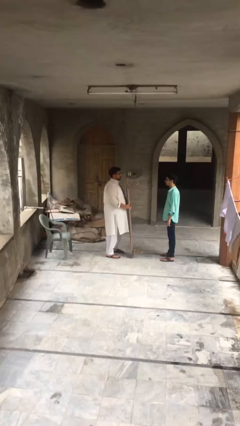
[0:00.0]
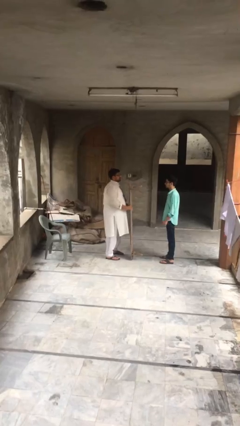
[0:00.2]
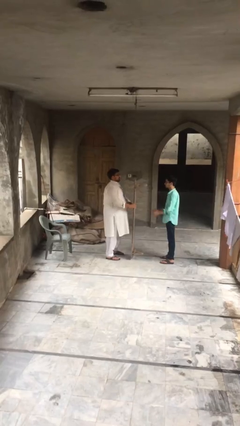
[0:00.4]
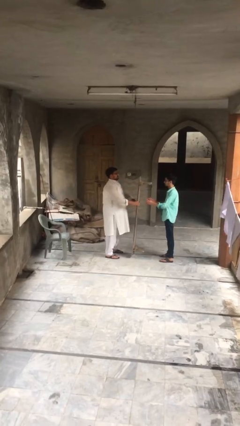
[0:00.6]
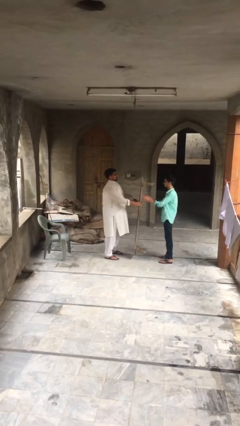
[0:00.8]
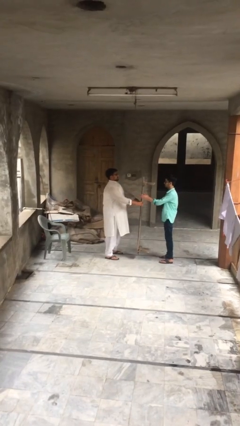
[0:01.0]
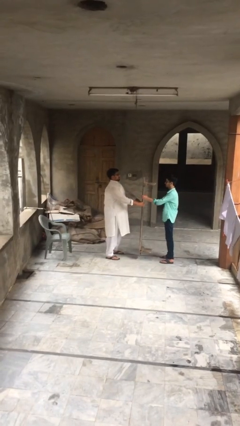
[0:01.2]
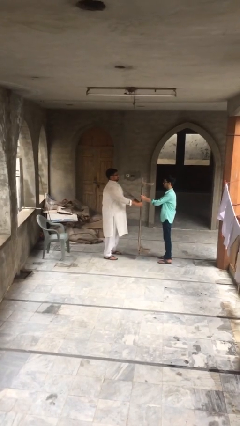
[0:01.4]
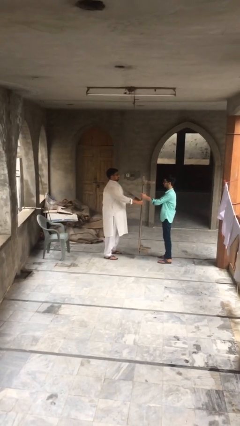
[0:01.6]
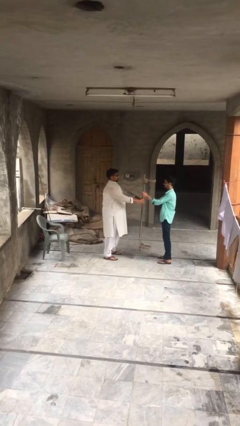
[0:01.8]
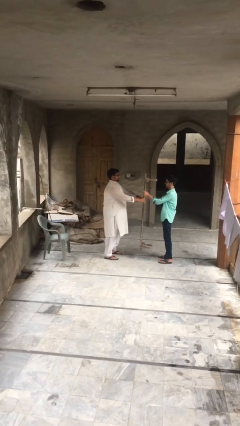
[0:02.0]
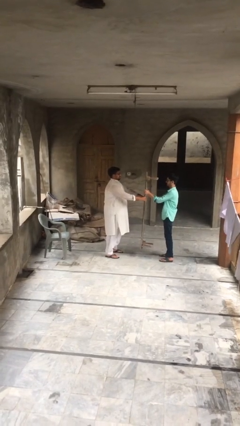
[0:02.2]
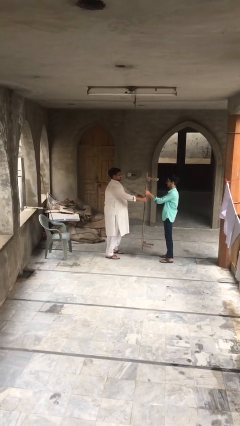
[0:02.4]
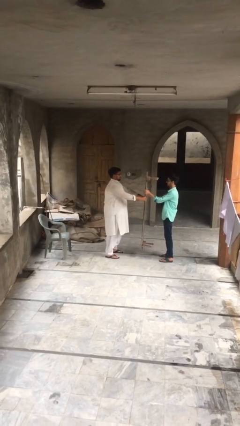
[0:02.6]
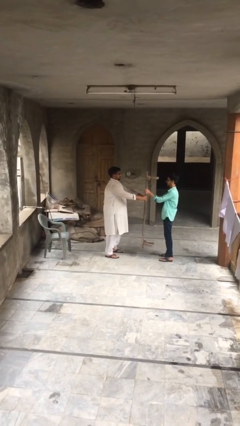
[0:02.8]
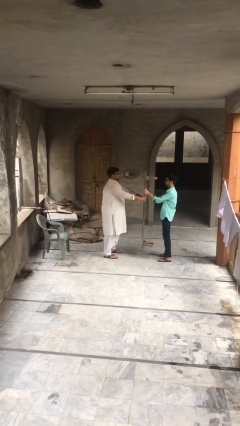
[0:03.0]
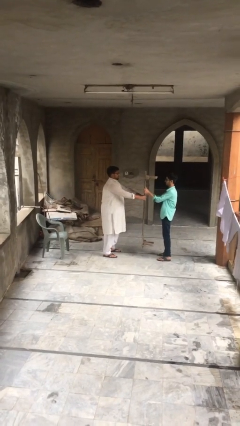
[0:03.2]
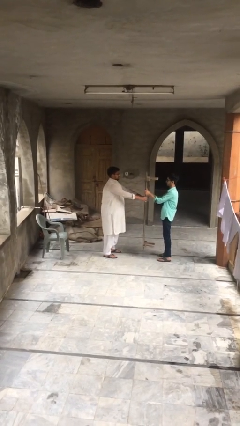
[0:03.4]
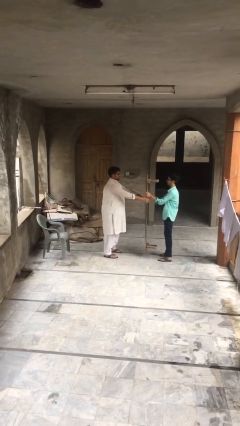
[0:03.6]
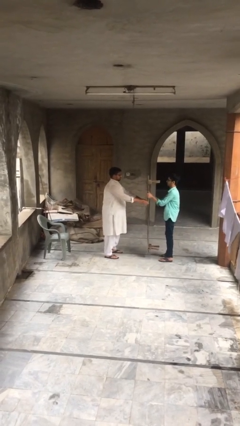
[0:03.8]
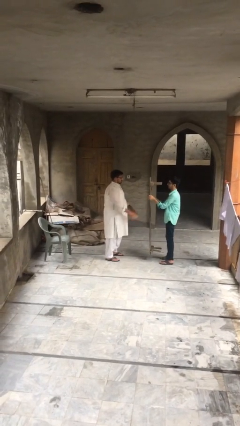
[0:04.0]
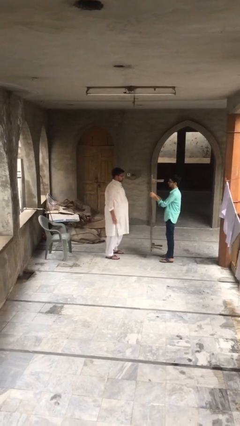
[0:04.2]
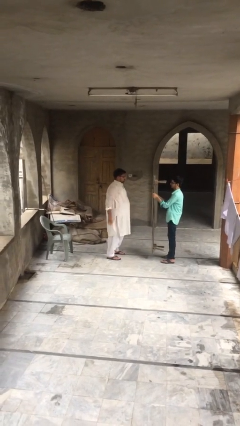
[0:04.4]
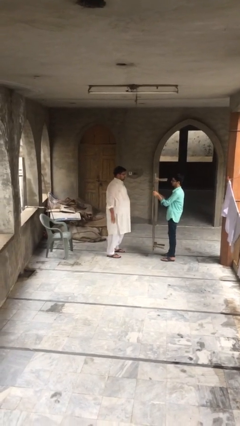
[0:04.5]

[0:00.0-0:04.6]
person transfers object to person

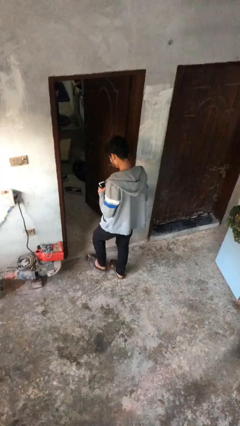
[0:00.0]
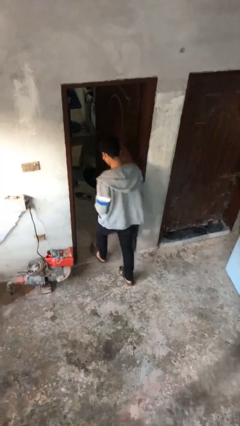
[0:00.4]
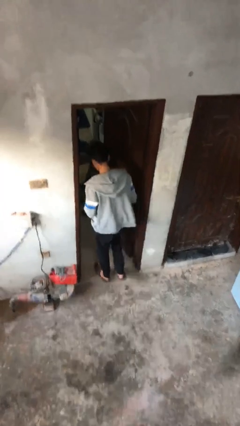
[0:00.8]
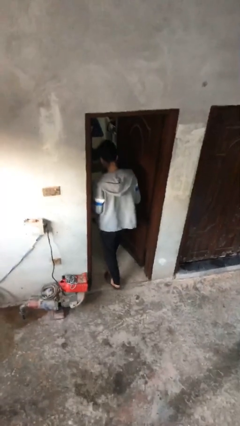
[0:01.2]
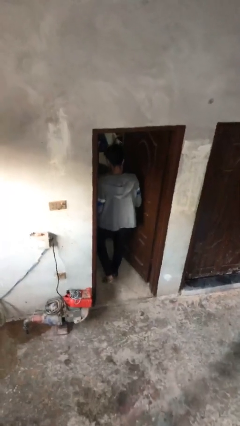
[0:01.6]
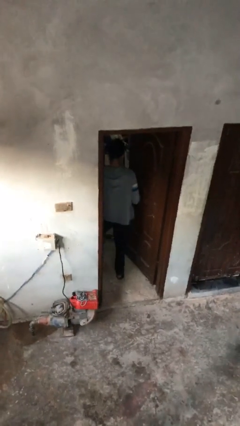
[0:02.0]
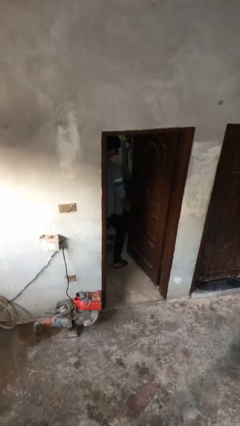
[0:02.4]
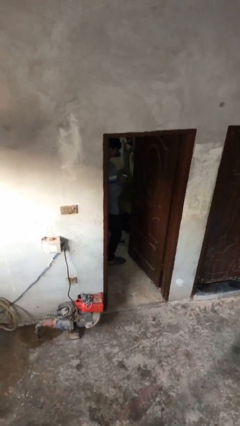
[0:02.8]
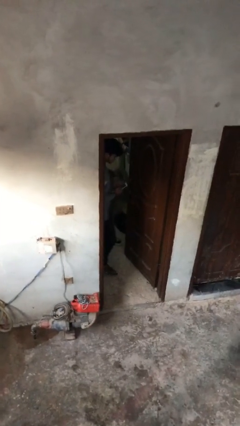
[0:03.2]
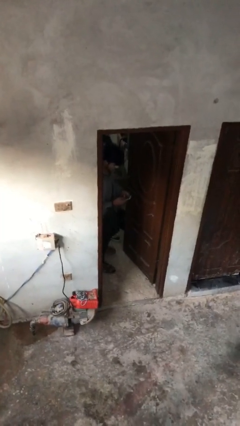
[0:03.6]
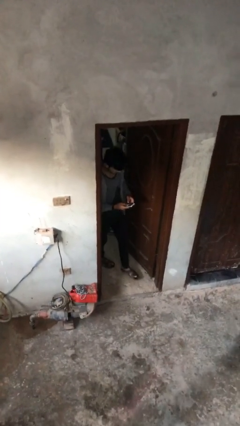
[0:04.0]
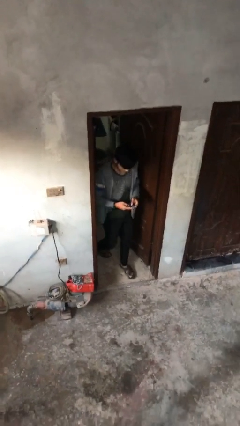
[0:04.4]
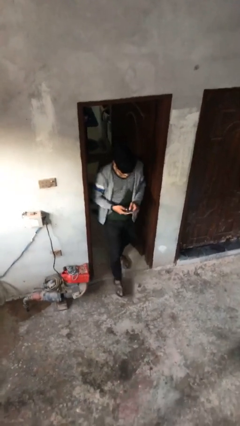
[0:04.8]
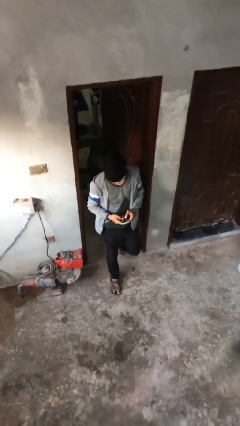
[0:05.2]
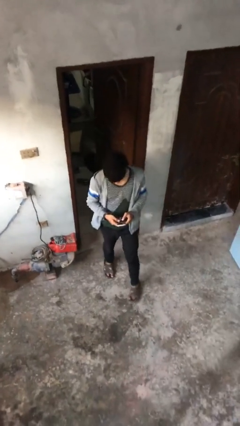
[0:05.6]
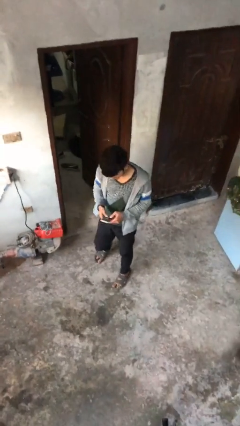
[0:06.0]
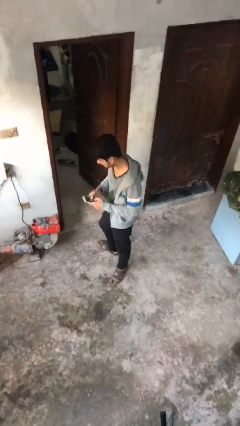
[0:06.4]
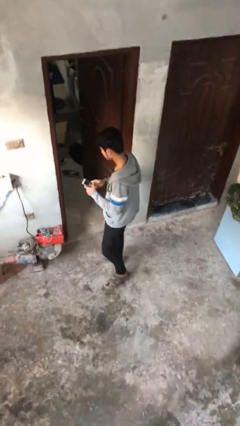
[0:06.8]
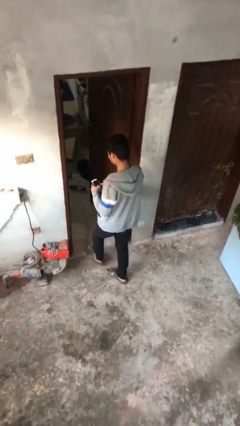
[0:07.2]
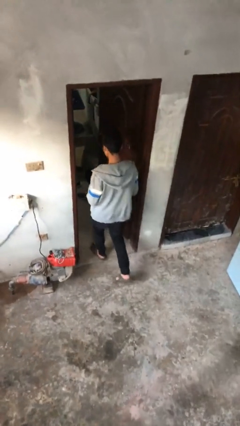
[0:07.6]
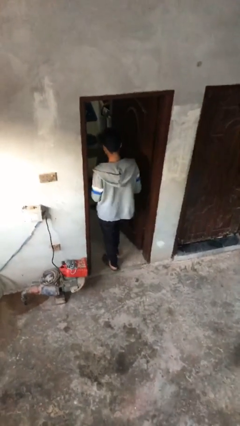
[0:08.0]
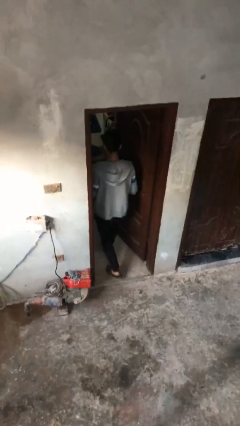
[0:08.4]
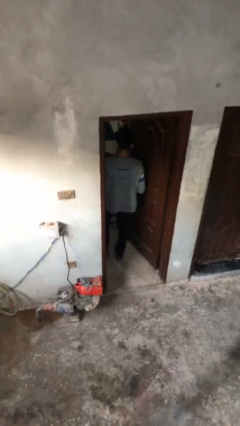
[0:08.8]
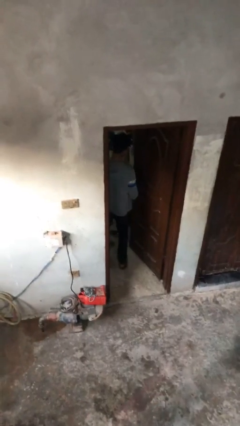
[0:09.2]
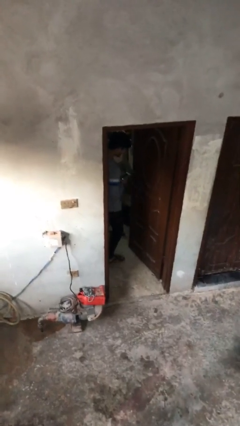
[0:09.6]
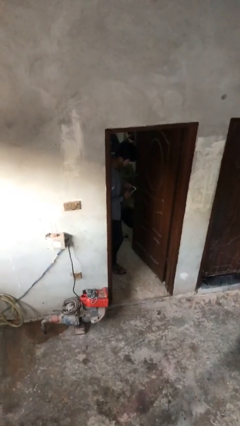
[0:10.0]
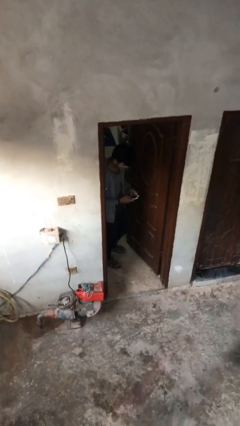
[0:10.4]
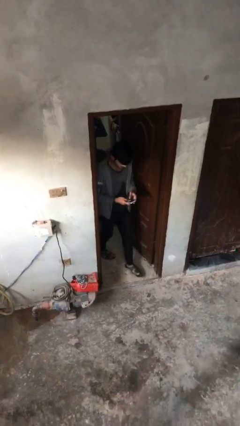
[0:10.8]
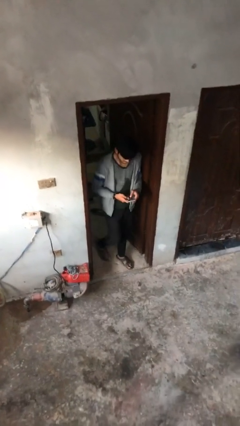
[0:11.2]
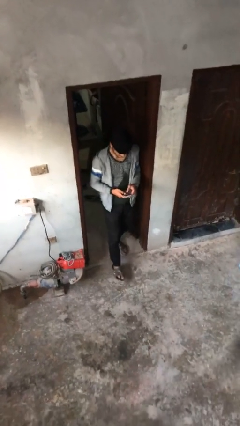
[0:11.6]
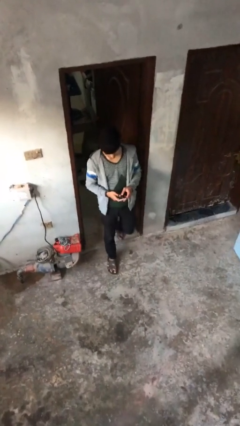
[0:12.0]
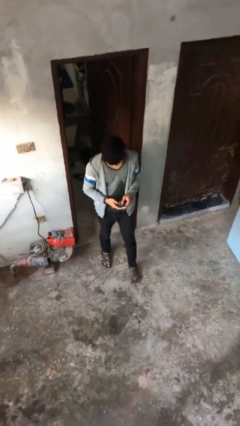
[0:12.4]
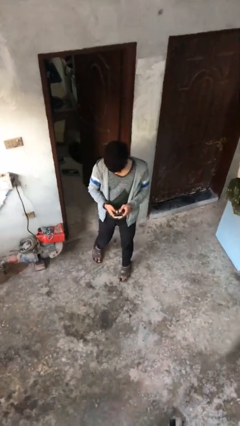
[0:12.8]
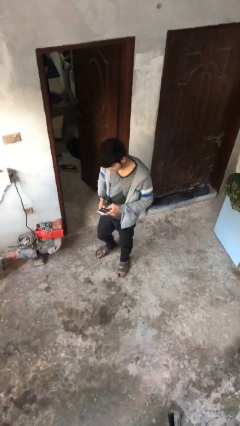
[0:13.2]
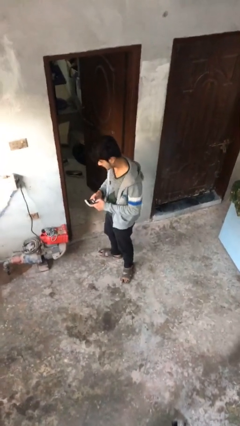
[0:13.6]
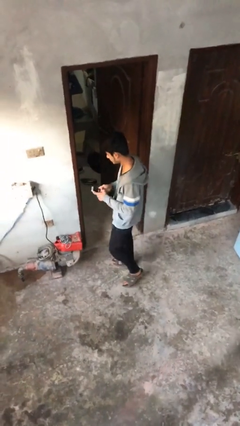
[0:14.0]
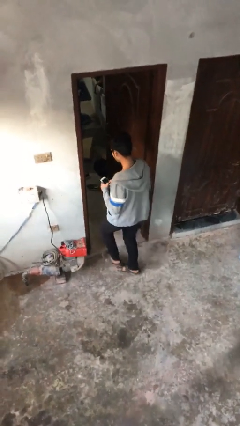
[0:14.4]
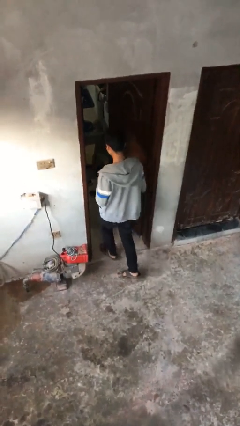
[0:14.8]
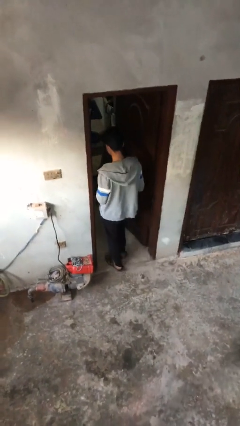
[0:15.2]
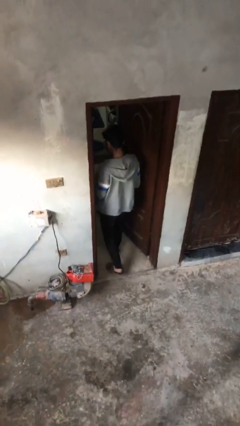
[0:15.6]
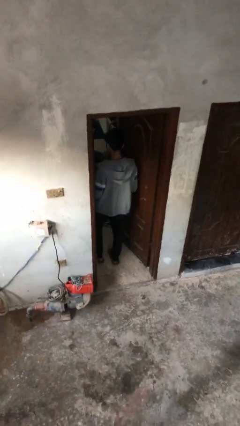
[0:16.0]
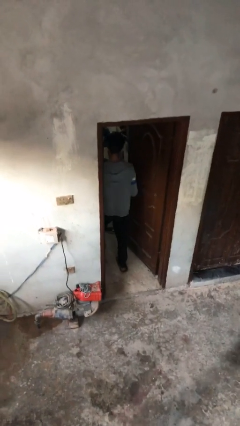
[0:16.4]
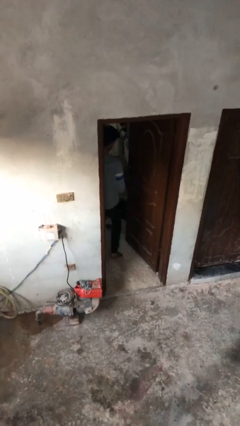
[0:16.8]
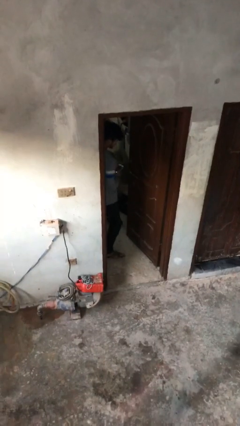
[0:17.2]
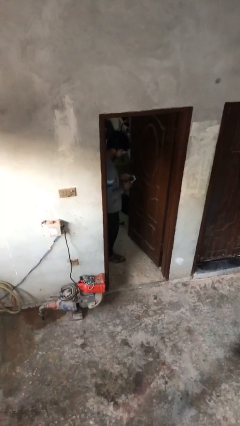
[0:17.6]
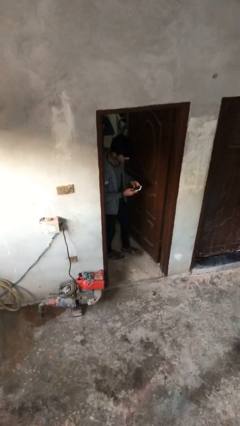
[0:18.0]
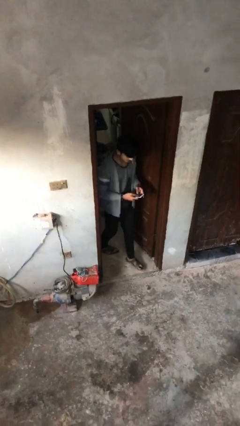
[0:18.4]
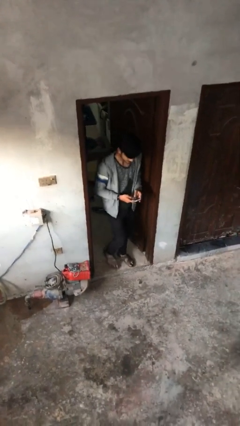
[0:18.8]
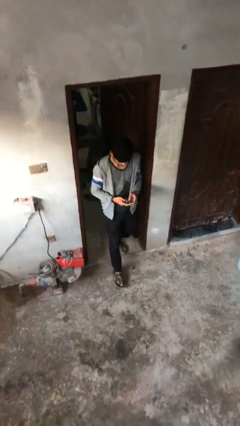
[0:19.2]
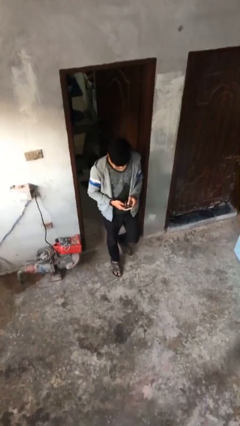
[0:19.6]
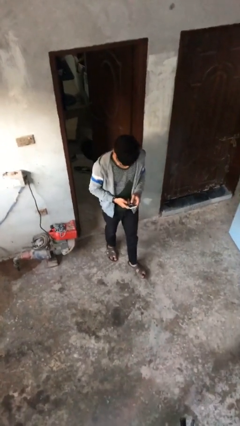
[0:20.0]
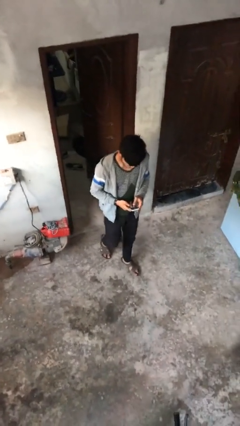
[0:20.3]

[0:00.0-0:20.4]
person texts on phone

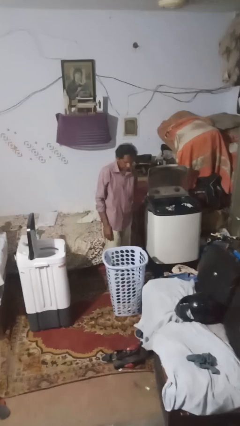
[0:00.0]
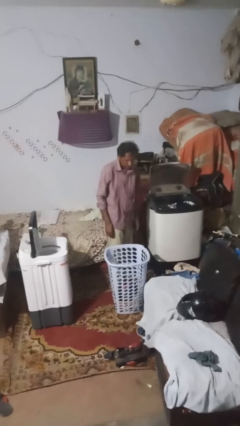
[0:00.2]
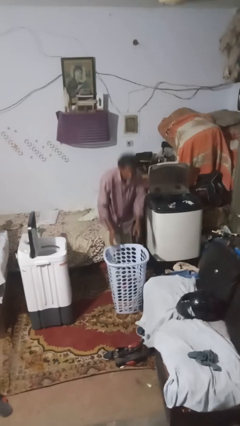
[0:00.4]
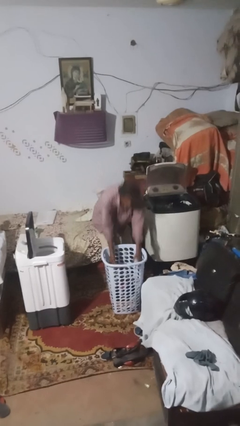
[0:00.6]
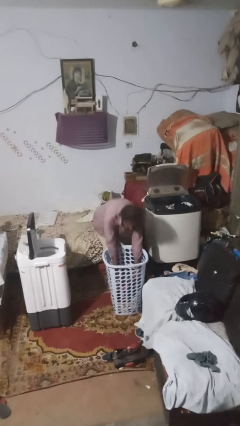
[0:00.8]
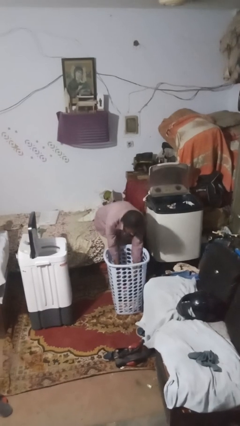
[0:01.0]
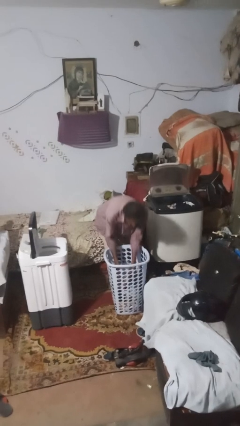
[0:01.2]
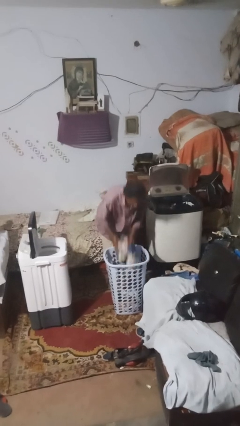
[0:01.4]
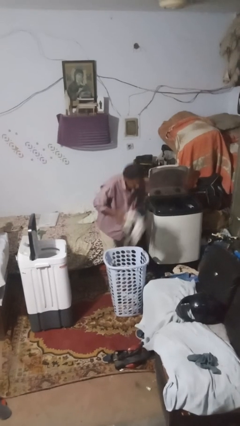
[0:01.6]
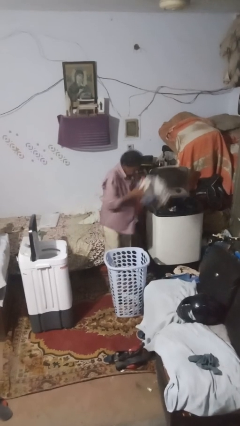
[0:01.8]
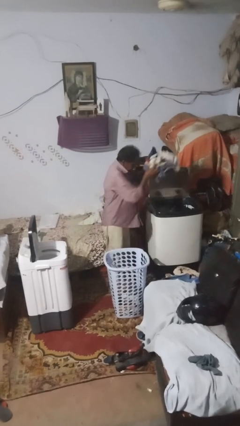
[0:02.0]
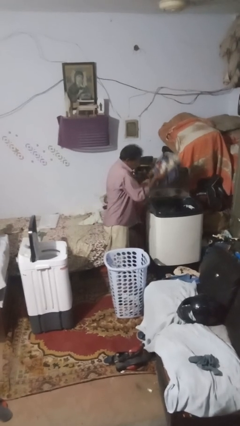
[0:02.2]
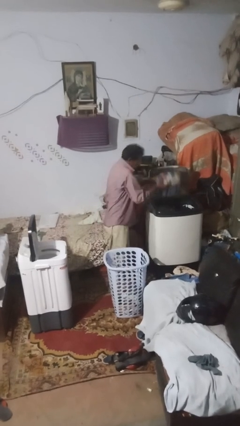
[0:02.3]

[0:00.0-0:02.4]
person loads clotheswasher

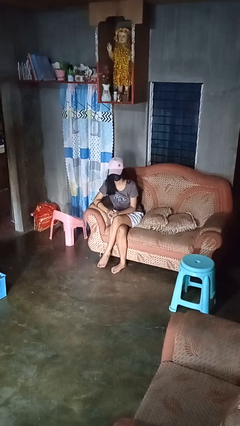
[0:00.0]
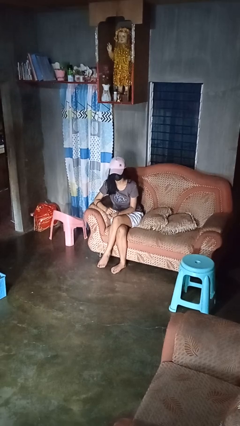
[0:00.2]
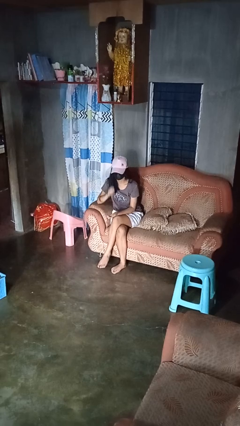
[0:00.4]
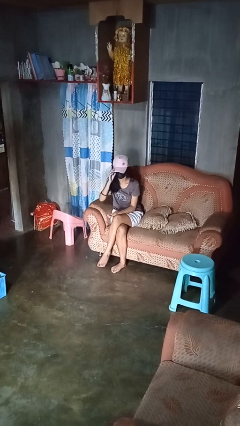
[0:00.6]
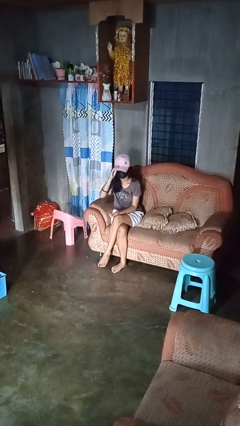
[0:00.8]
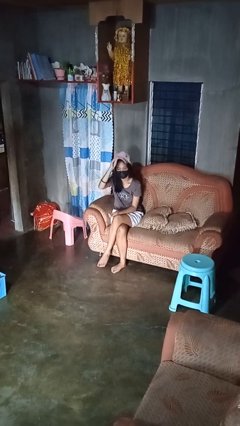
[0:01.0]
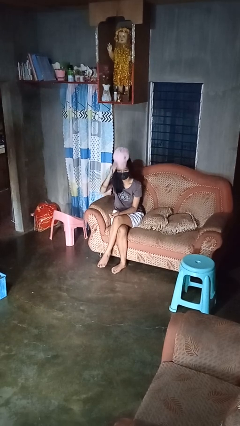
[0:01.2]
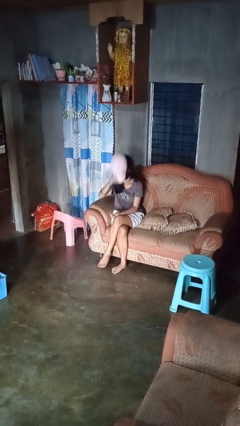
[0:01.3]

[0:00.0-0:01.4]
person takes off hat
